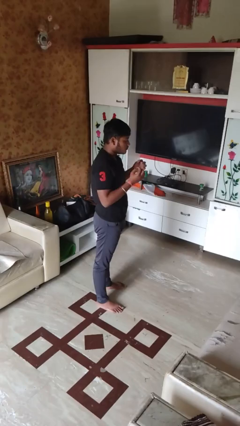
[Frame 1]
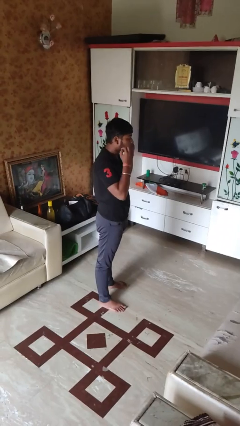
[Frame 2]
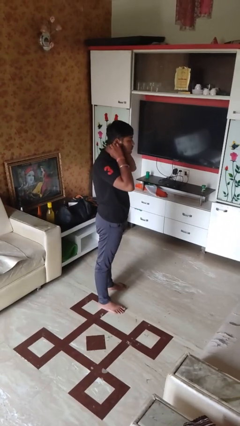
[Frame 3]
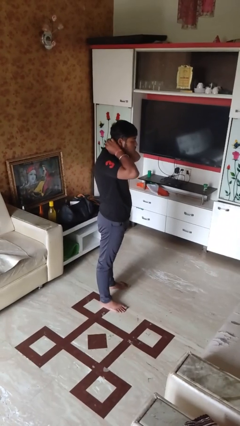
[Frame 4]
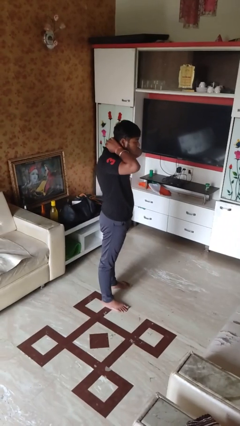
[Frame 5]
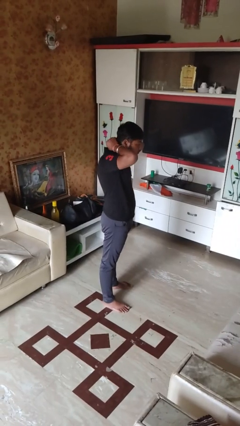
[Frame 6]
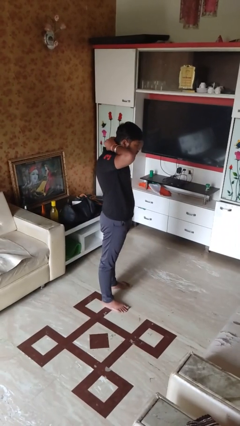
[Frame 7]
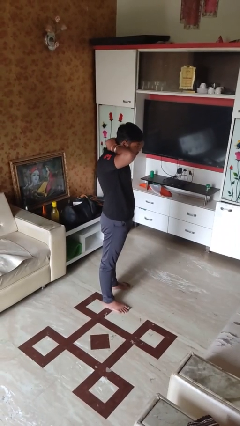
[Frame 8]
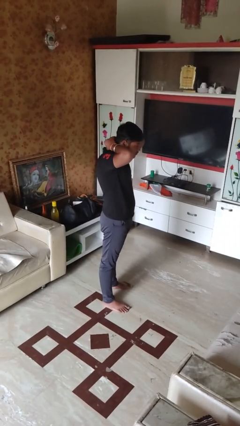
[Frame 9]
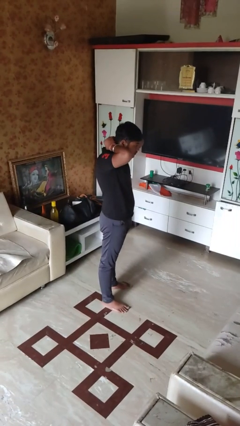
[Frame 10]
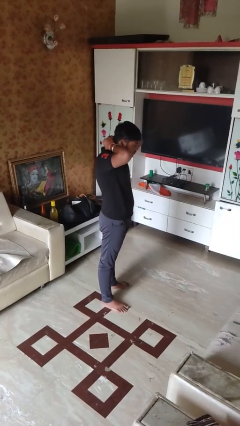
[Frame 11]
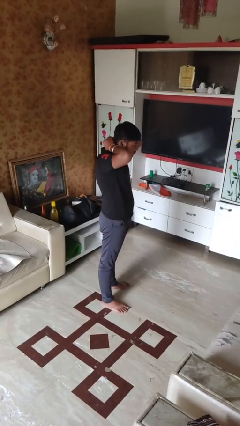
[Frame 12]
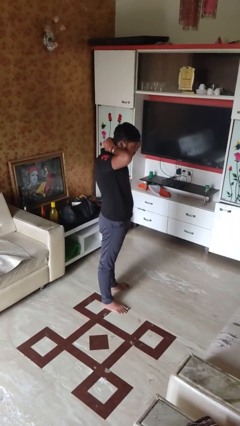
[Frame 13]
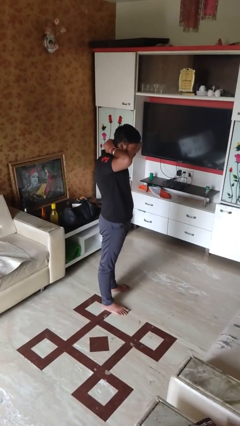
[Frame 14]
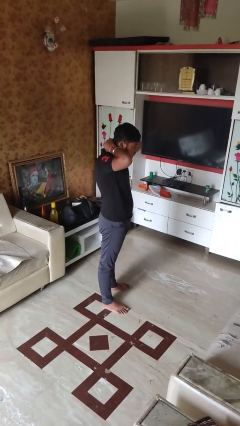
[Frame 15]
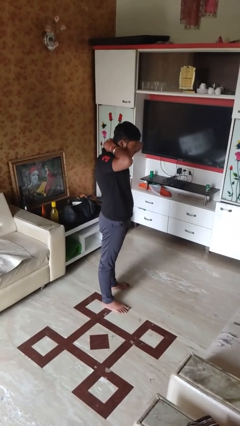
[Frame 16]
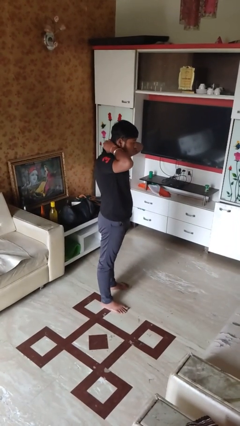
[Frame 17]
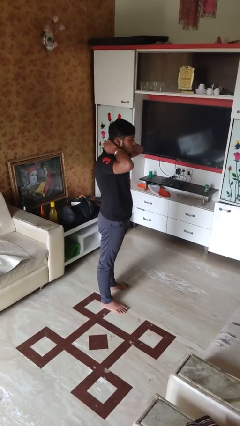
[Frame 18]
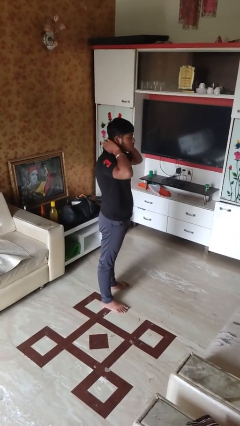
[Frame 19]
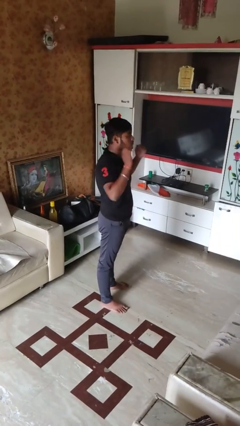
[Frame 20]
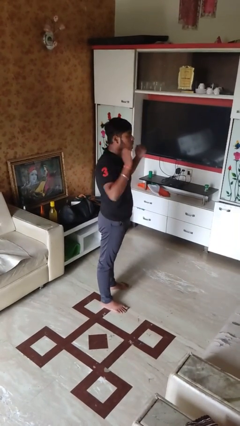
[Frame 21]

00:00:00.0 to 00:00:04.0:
person puts on necklace

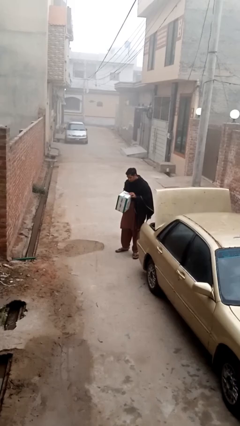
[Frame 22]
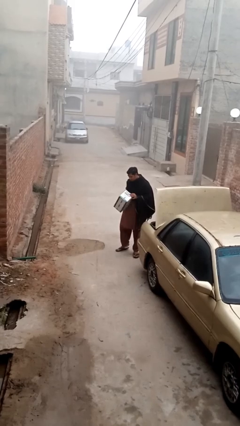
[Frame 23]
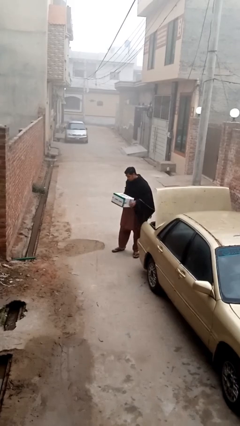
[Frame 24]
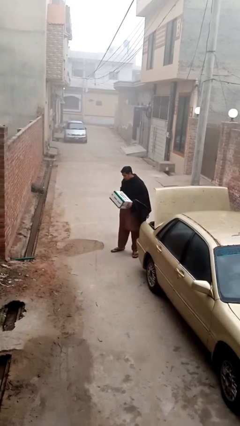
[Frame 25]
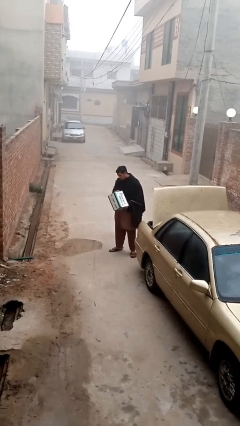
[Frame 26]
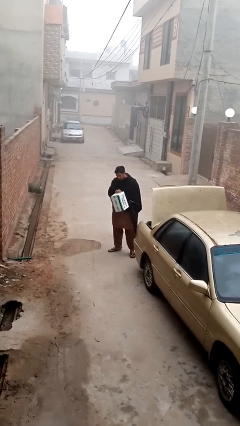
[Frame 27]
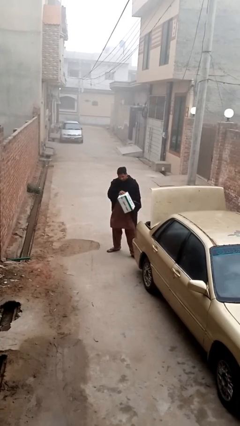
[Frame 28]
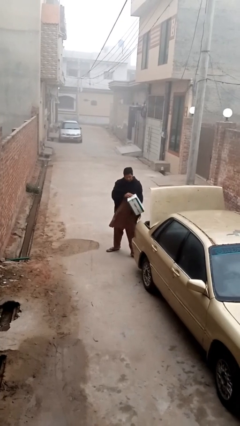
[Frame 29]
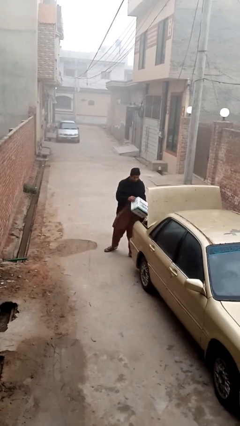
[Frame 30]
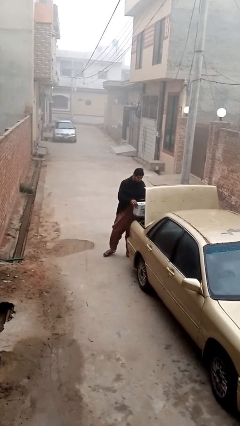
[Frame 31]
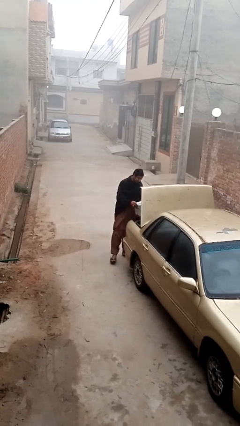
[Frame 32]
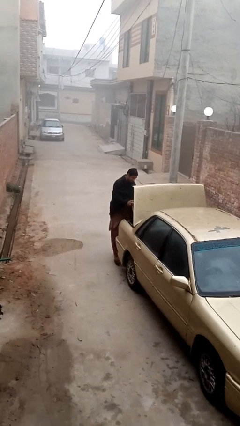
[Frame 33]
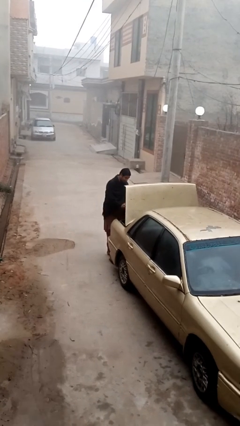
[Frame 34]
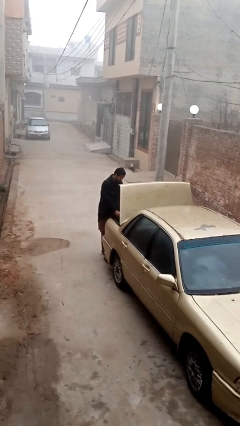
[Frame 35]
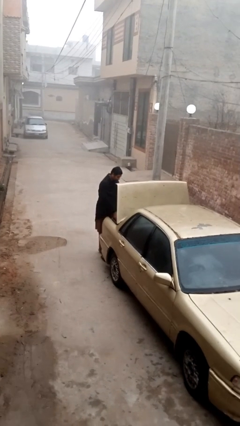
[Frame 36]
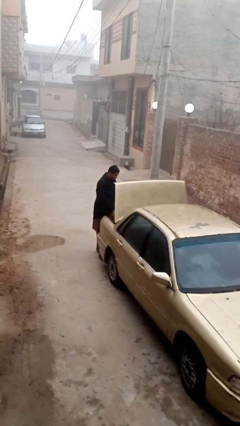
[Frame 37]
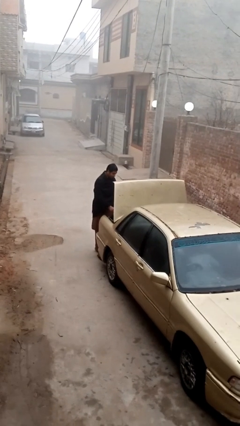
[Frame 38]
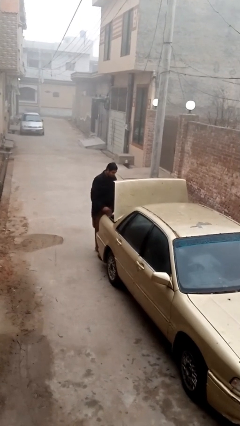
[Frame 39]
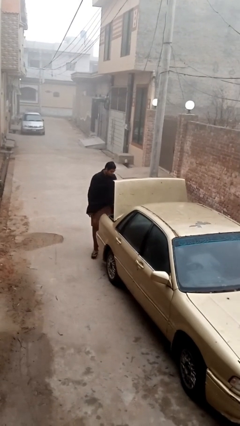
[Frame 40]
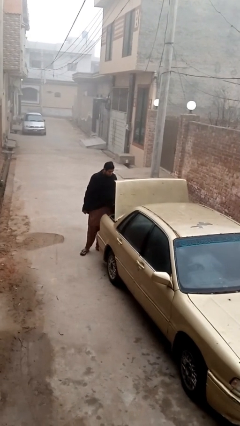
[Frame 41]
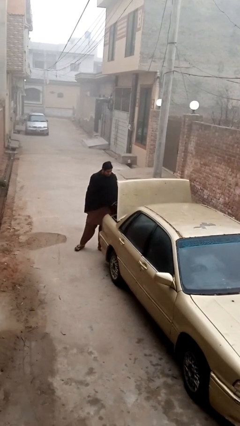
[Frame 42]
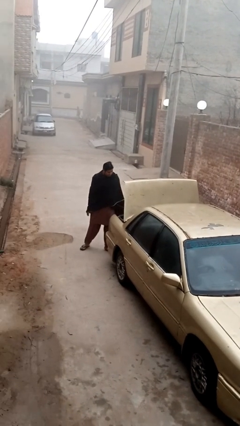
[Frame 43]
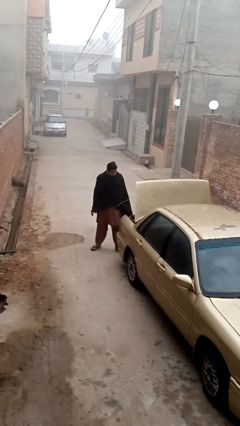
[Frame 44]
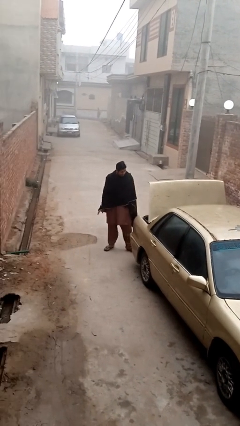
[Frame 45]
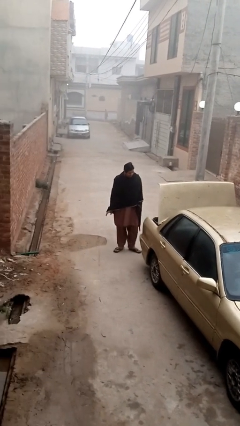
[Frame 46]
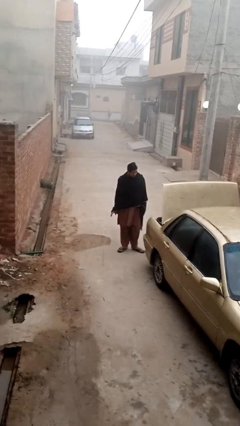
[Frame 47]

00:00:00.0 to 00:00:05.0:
person loads car

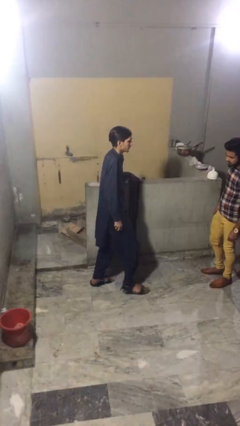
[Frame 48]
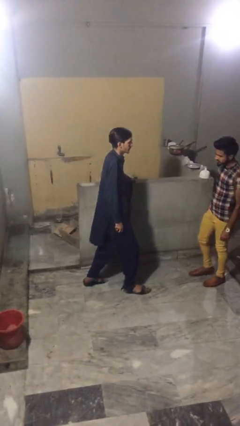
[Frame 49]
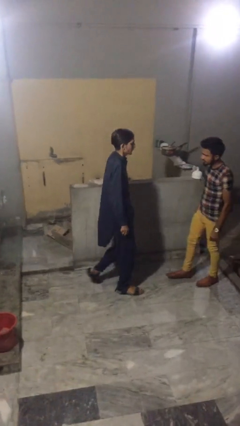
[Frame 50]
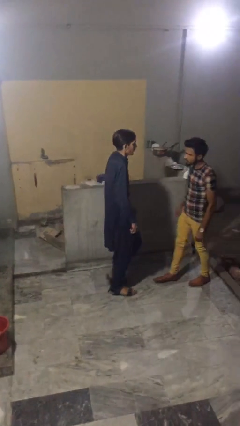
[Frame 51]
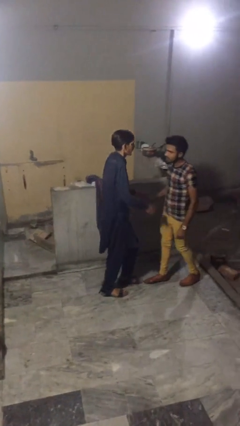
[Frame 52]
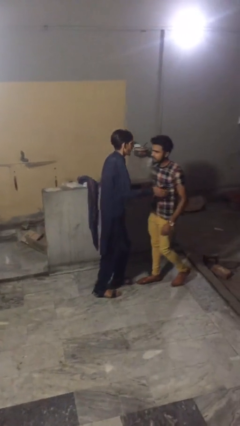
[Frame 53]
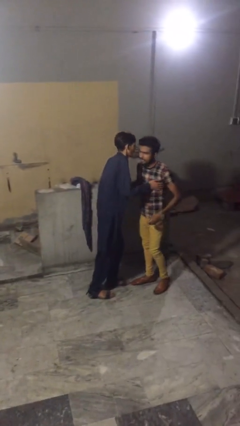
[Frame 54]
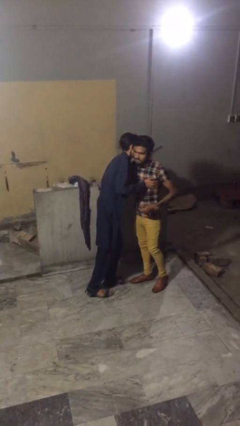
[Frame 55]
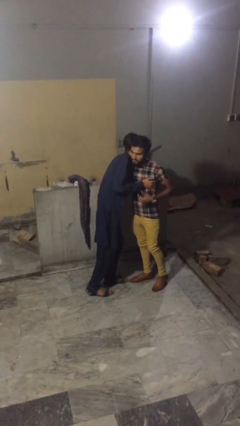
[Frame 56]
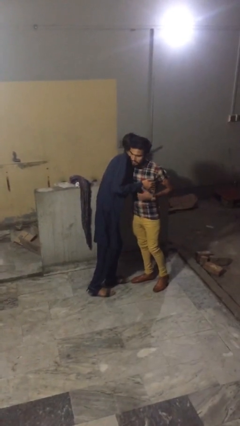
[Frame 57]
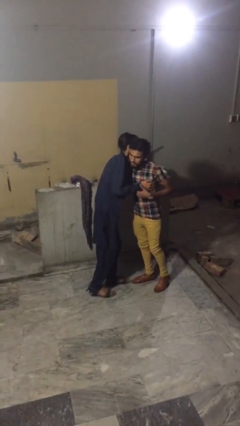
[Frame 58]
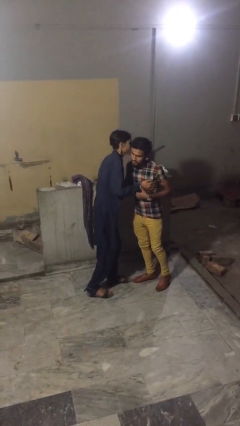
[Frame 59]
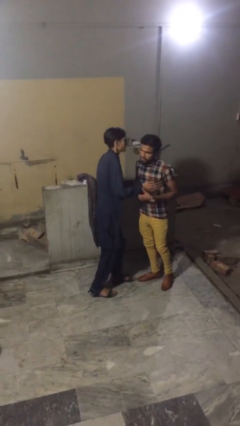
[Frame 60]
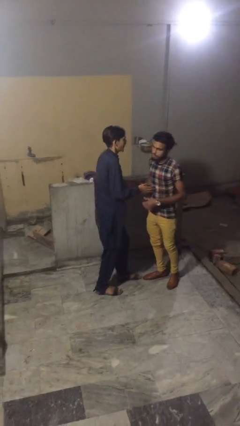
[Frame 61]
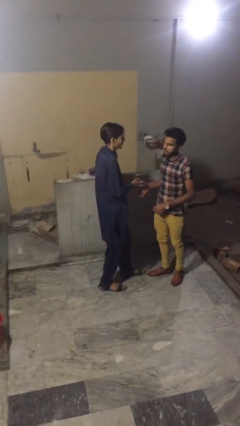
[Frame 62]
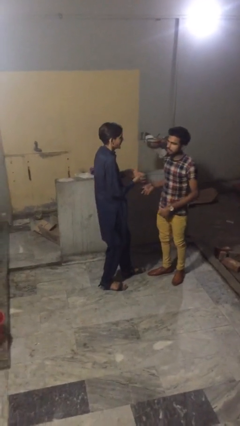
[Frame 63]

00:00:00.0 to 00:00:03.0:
person embraces person

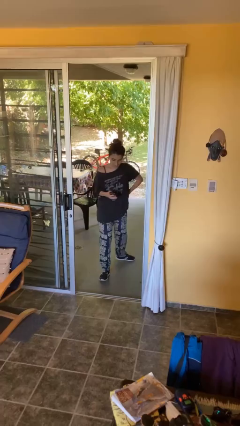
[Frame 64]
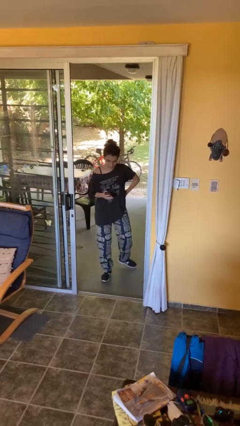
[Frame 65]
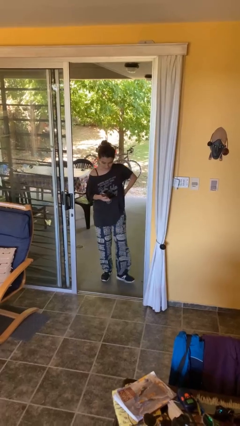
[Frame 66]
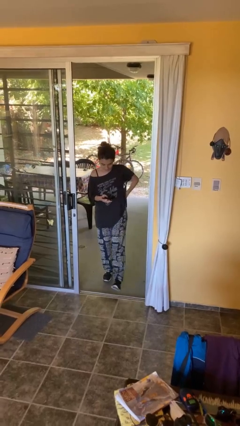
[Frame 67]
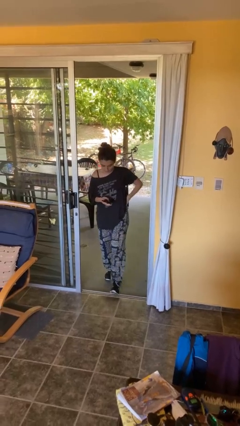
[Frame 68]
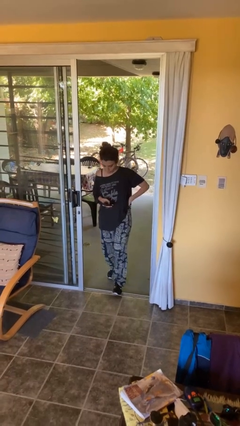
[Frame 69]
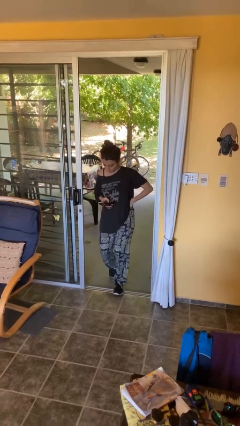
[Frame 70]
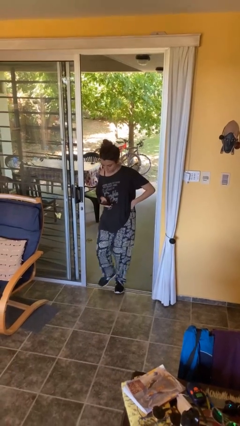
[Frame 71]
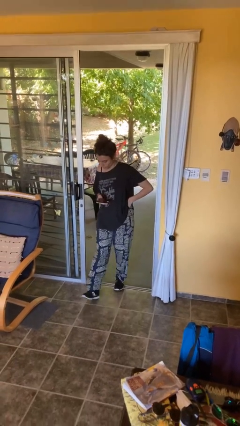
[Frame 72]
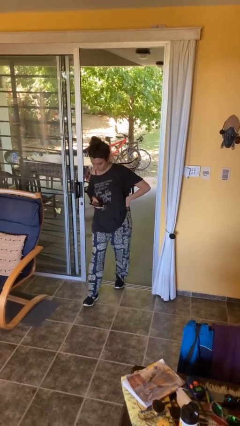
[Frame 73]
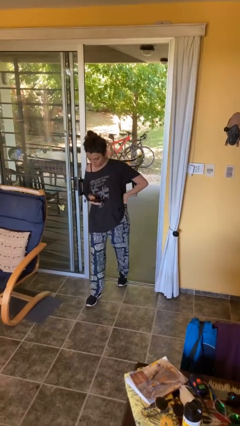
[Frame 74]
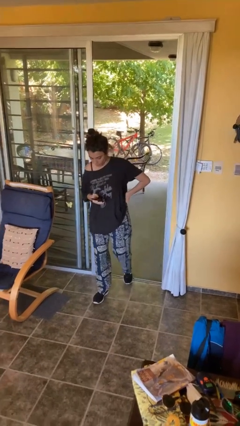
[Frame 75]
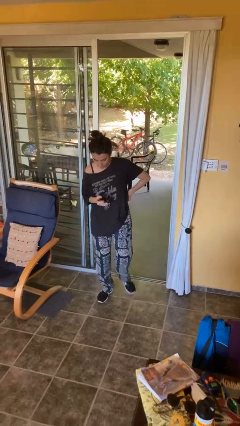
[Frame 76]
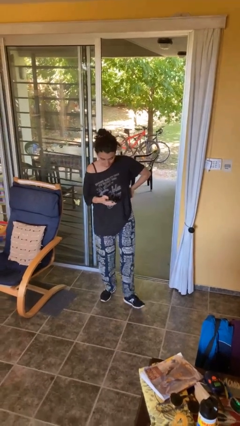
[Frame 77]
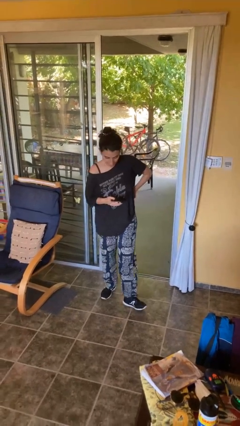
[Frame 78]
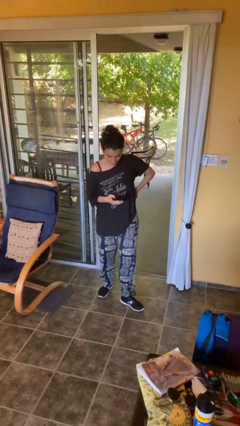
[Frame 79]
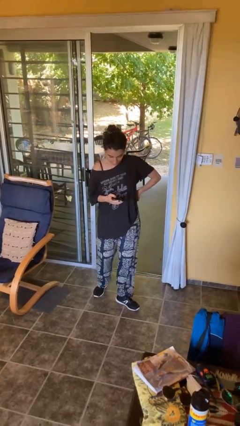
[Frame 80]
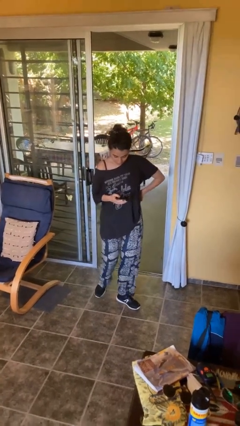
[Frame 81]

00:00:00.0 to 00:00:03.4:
person enters scene through structure

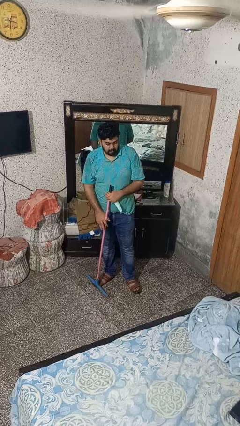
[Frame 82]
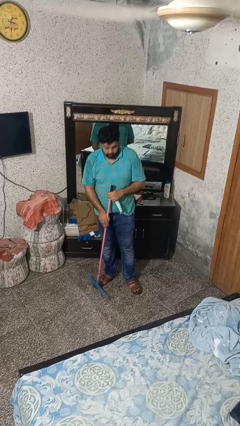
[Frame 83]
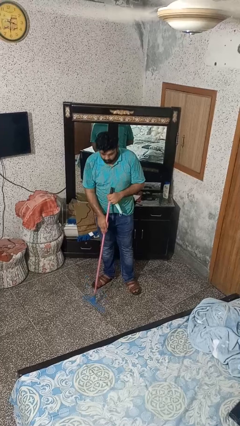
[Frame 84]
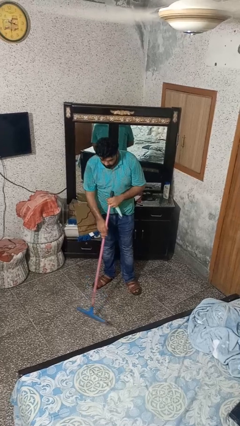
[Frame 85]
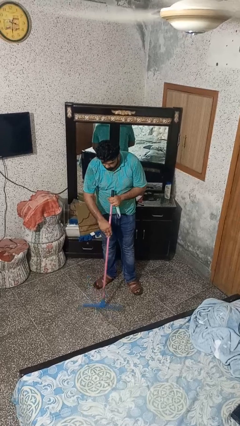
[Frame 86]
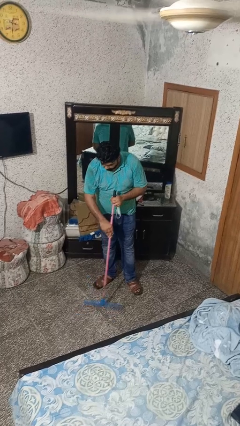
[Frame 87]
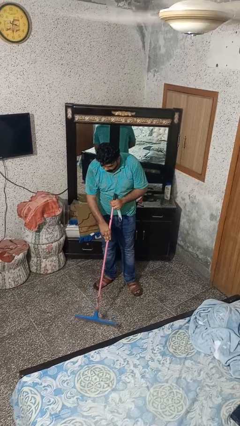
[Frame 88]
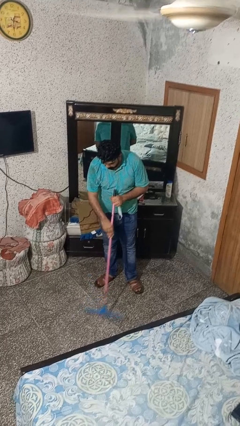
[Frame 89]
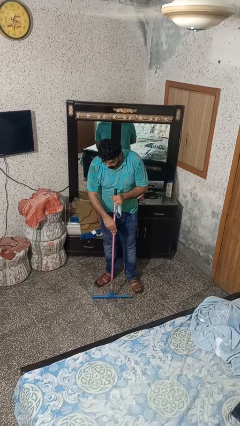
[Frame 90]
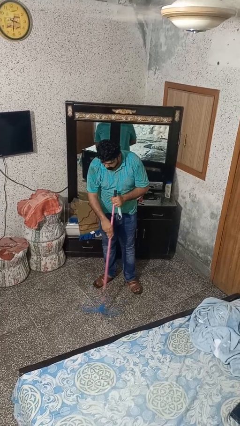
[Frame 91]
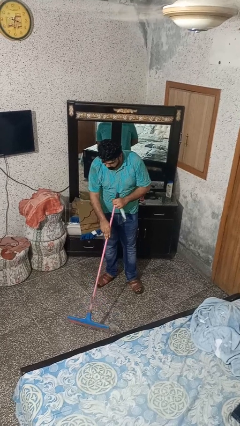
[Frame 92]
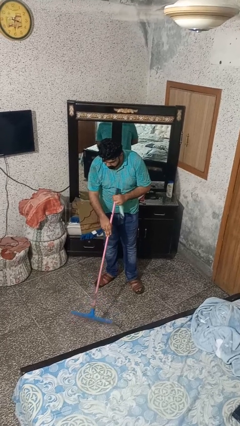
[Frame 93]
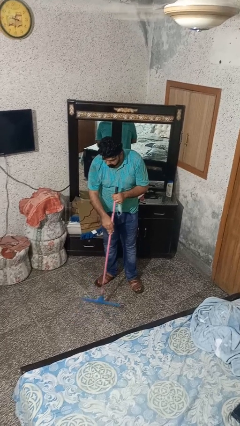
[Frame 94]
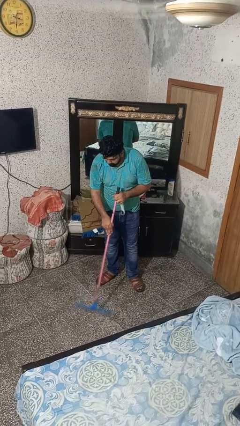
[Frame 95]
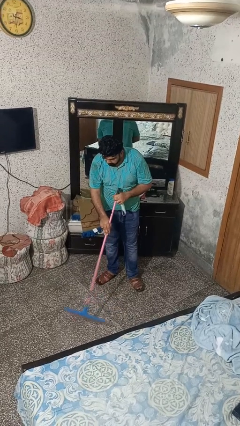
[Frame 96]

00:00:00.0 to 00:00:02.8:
person sweeps floor
